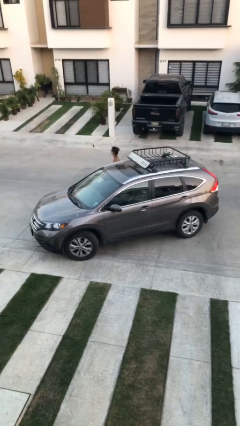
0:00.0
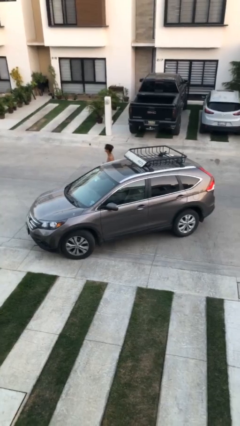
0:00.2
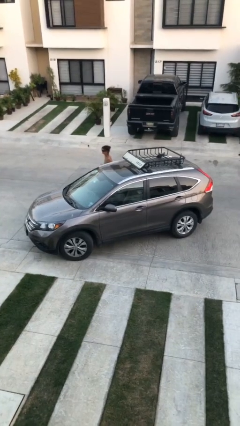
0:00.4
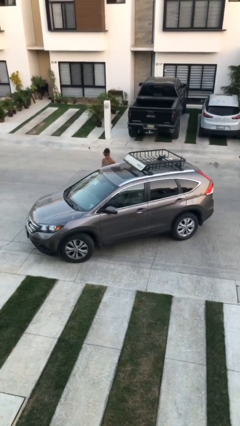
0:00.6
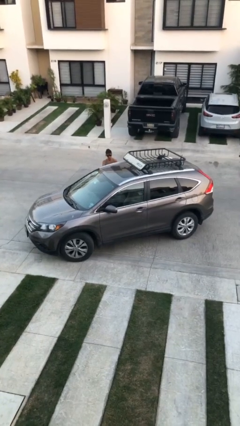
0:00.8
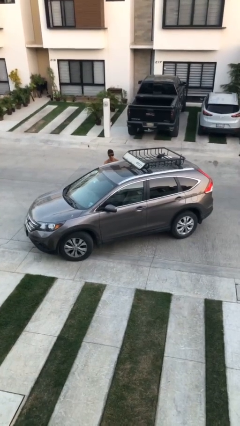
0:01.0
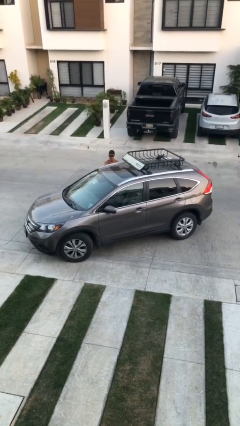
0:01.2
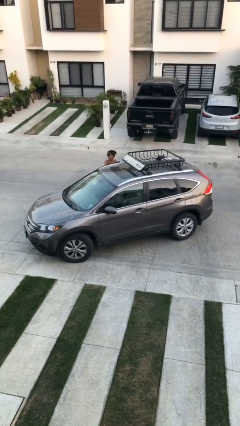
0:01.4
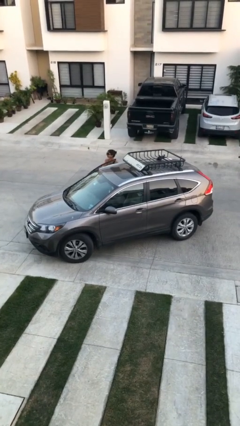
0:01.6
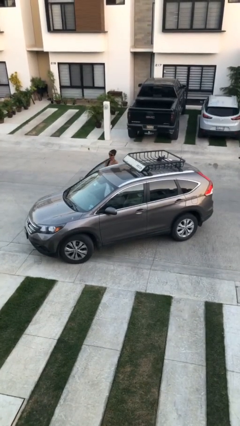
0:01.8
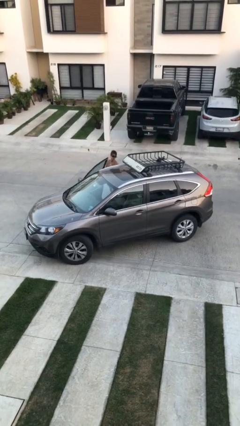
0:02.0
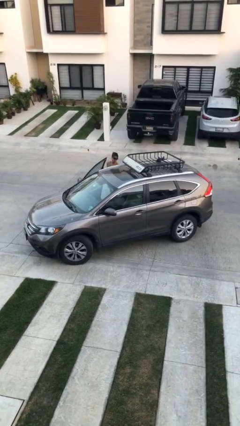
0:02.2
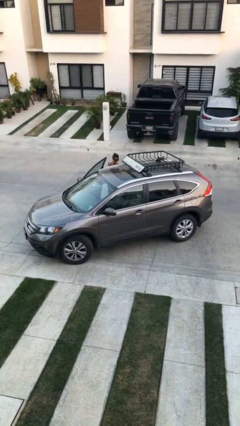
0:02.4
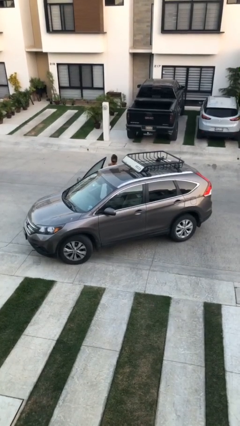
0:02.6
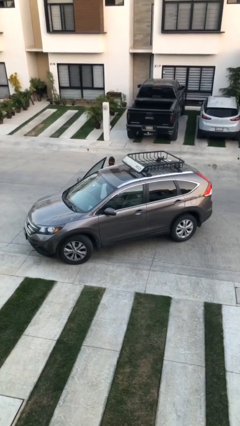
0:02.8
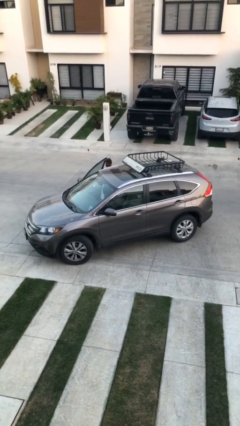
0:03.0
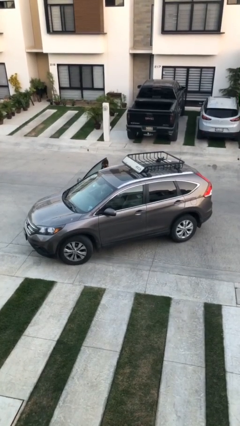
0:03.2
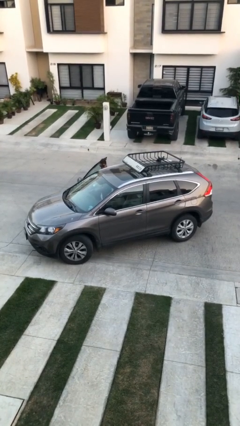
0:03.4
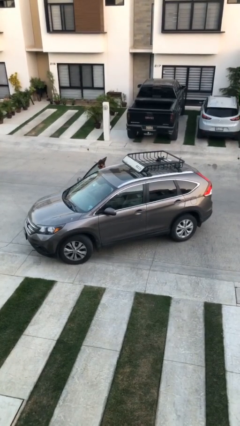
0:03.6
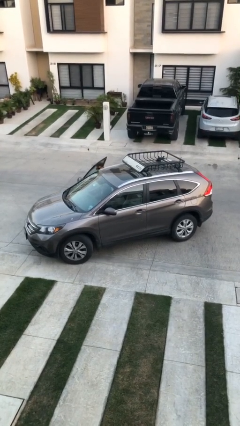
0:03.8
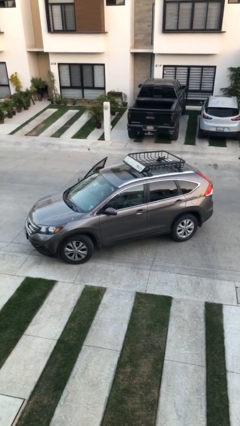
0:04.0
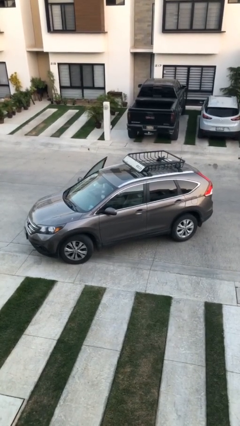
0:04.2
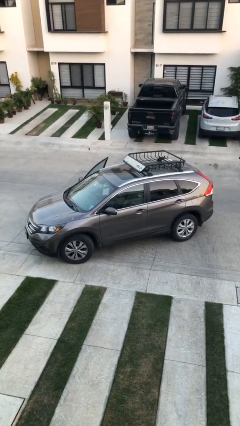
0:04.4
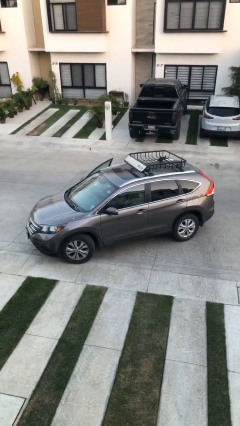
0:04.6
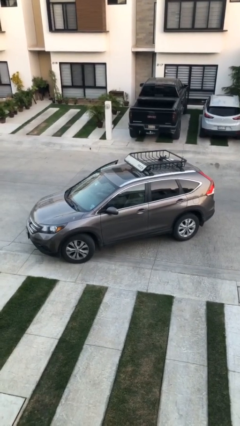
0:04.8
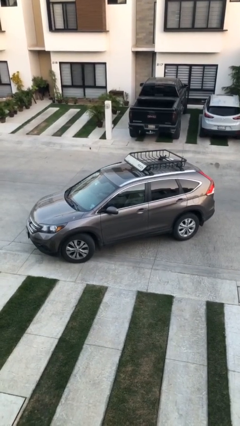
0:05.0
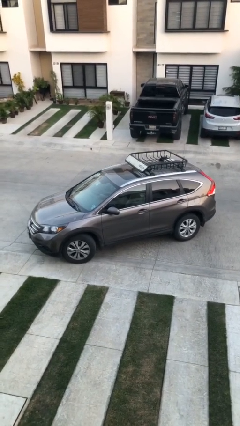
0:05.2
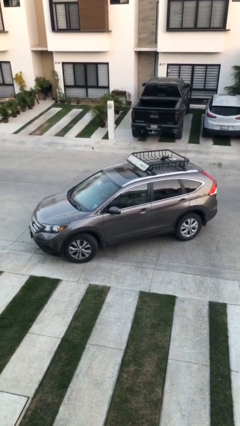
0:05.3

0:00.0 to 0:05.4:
car picks up person

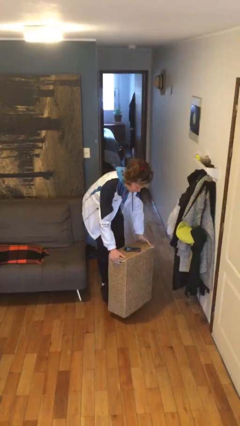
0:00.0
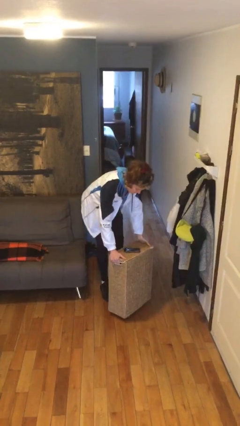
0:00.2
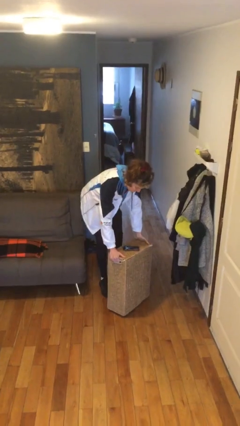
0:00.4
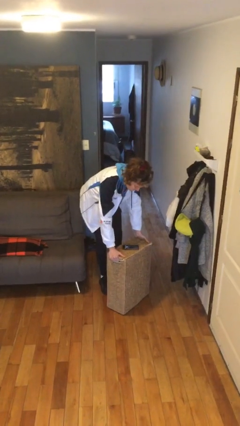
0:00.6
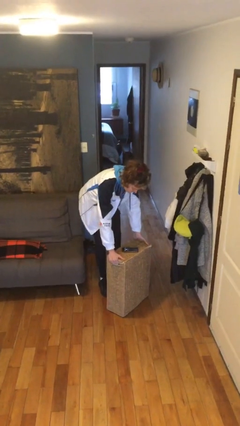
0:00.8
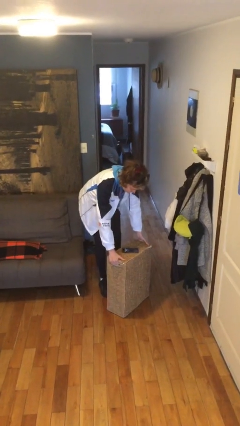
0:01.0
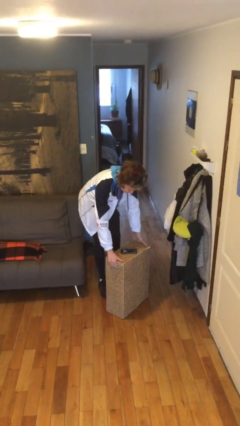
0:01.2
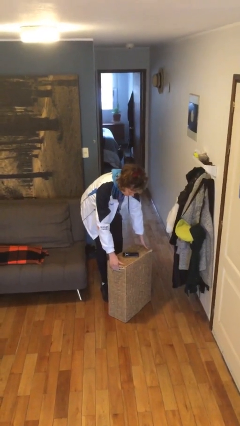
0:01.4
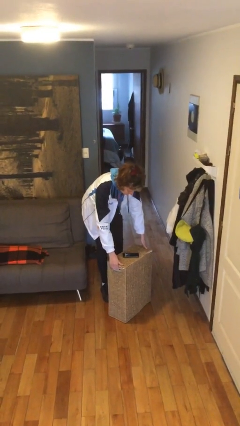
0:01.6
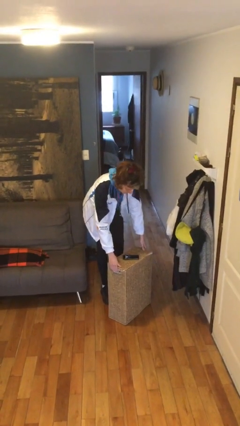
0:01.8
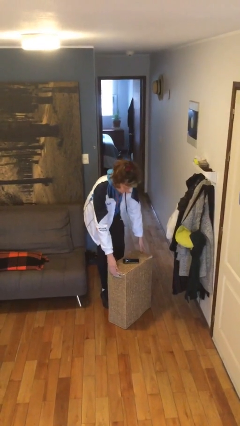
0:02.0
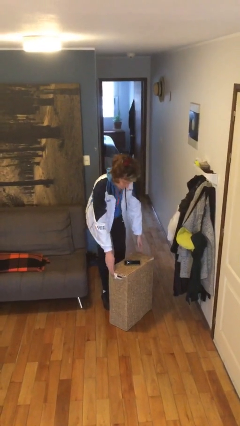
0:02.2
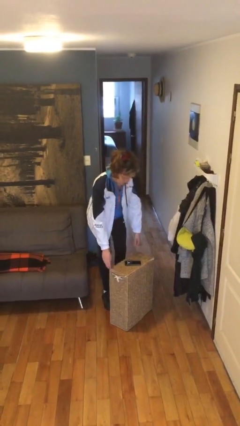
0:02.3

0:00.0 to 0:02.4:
person puts down object on floor

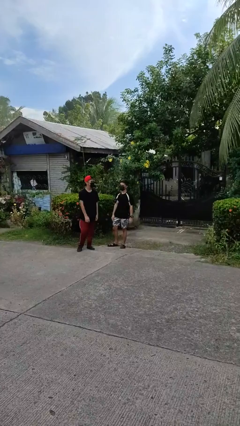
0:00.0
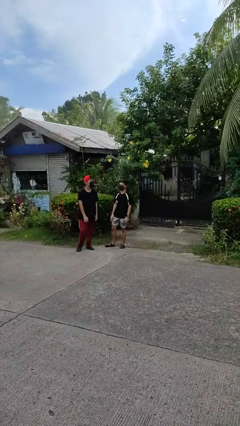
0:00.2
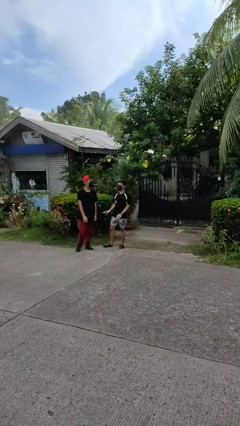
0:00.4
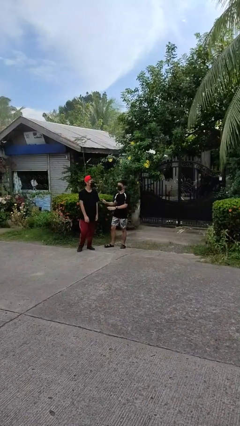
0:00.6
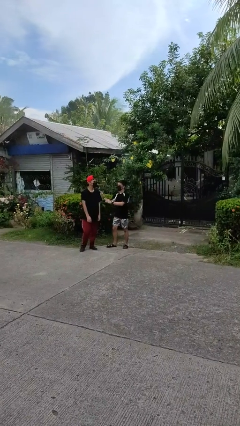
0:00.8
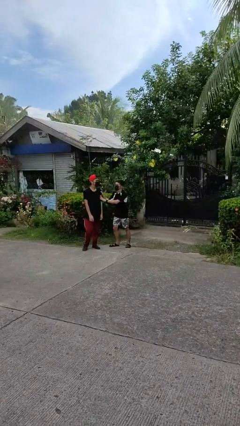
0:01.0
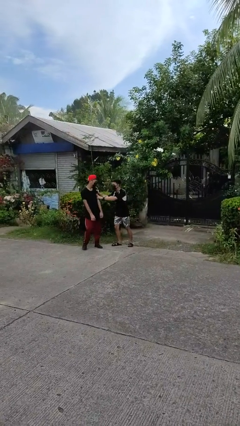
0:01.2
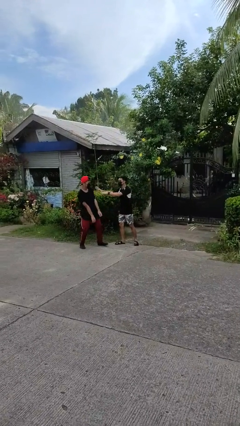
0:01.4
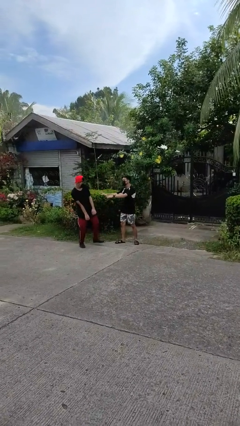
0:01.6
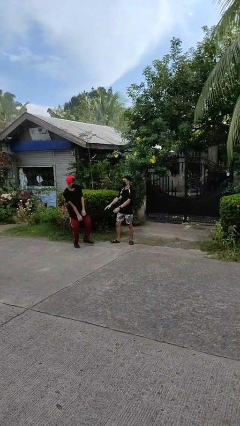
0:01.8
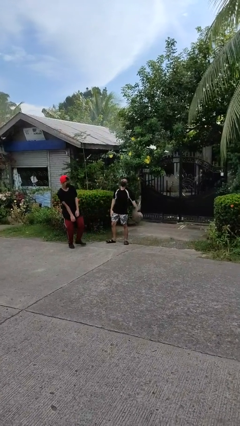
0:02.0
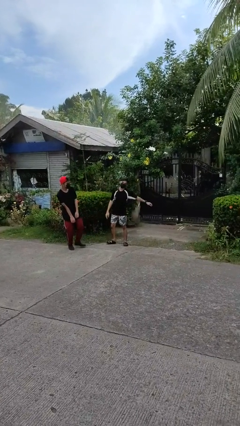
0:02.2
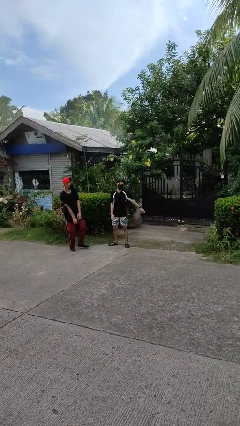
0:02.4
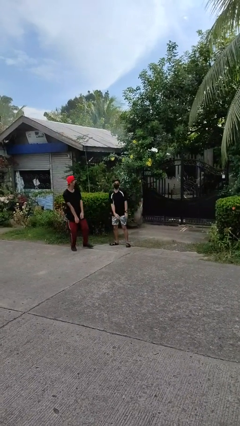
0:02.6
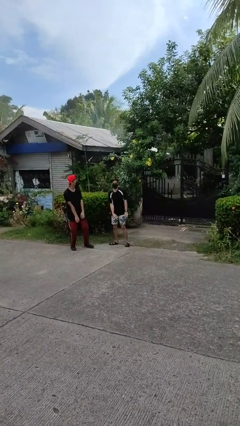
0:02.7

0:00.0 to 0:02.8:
person shoves person

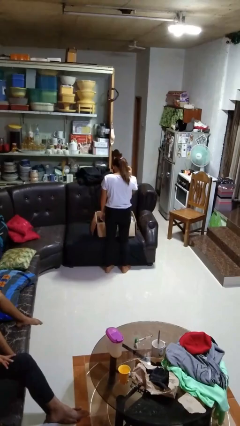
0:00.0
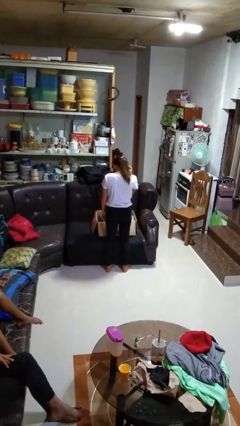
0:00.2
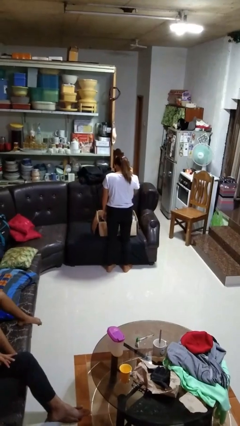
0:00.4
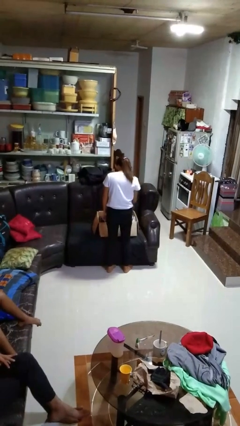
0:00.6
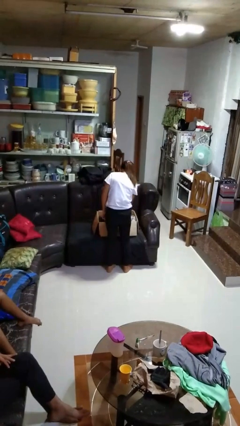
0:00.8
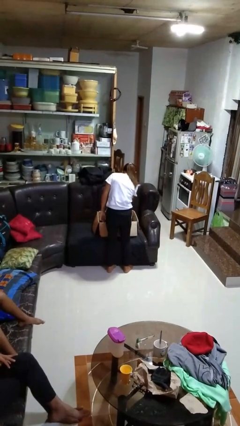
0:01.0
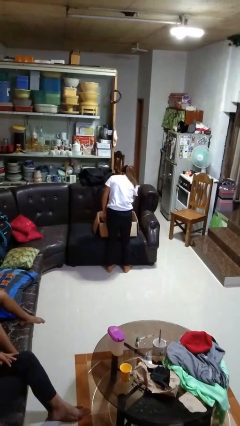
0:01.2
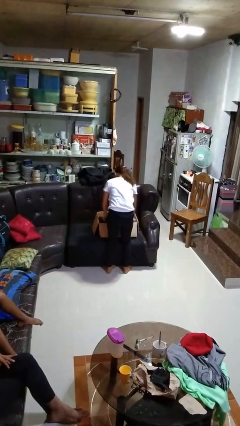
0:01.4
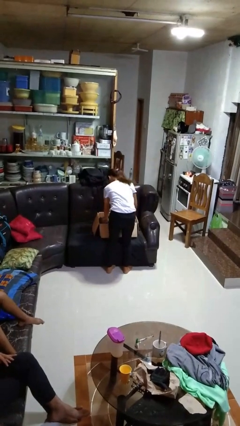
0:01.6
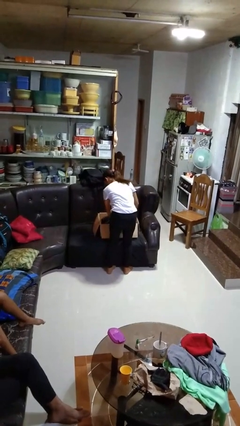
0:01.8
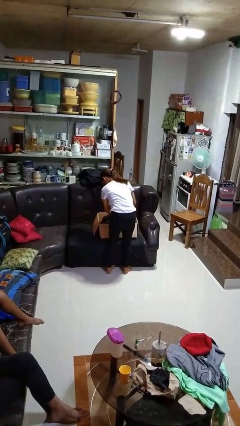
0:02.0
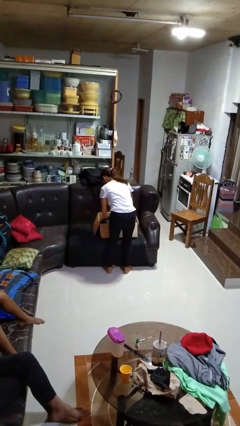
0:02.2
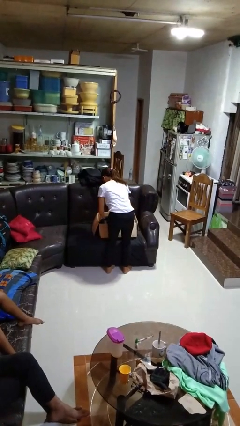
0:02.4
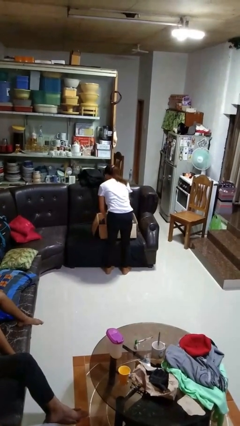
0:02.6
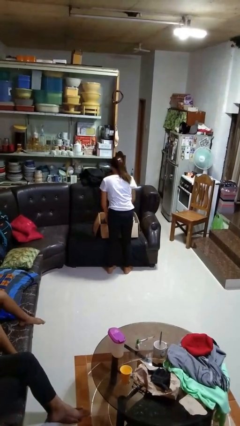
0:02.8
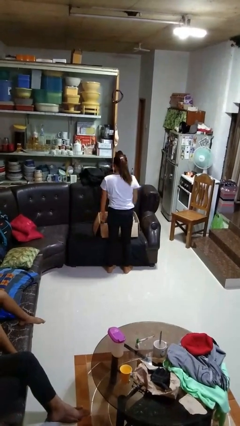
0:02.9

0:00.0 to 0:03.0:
person searches in box

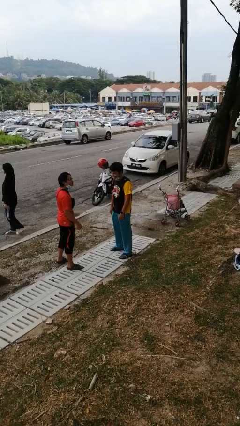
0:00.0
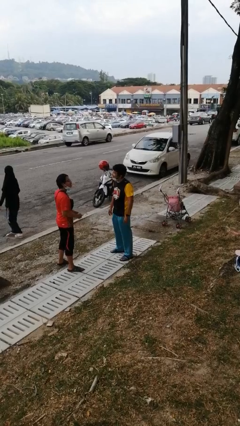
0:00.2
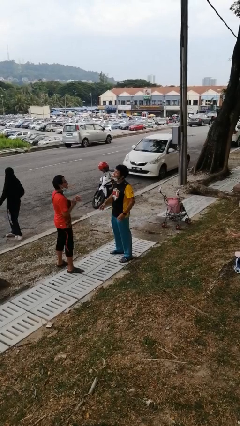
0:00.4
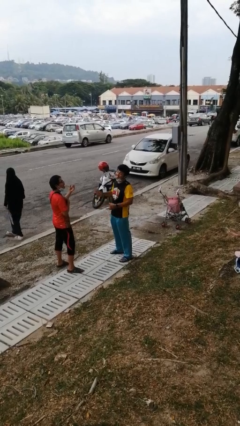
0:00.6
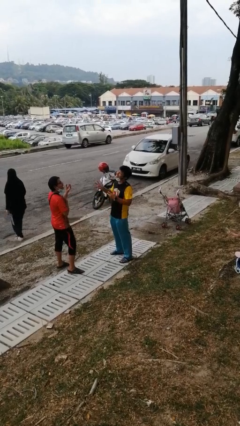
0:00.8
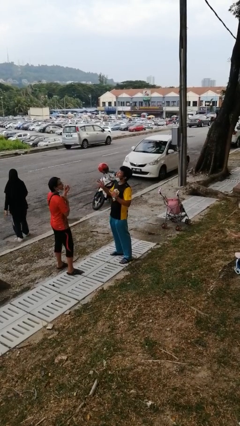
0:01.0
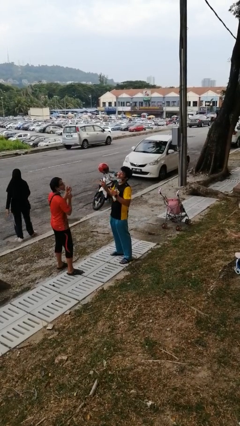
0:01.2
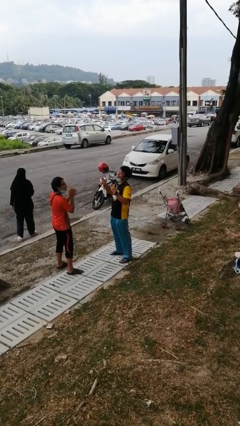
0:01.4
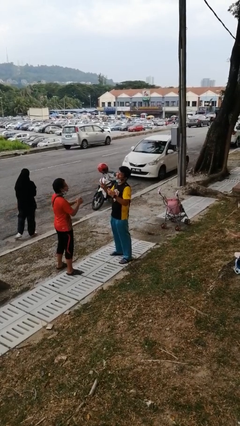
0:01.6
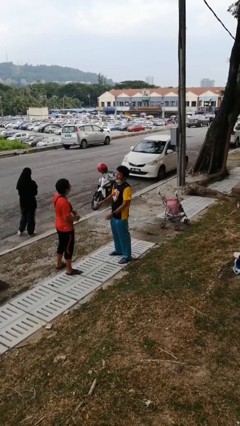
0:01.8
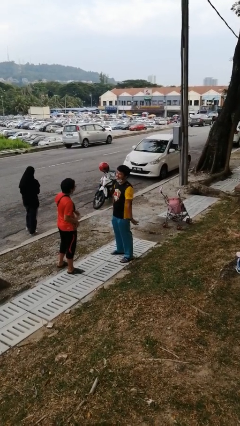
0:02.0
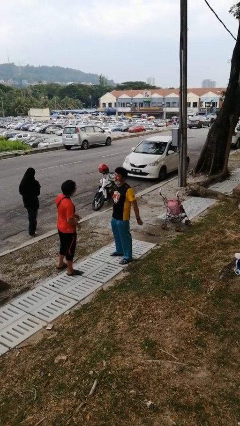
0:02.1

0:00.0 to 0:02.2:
person laughs with person

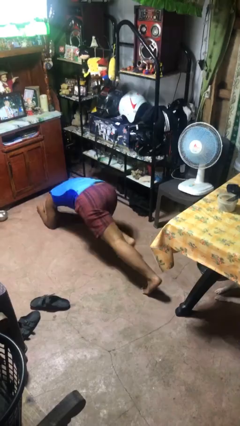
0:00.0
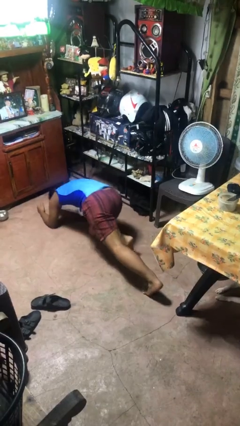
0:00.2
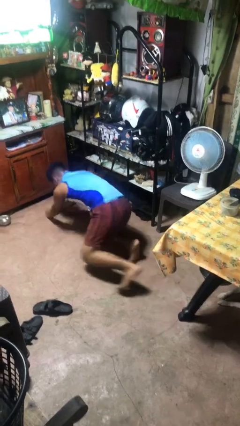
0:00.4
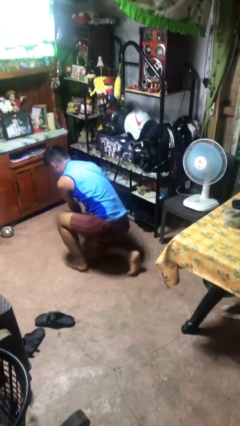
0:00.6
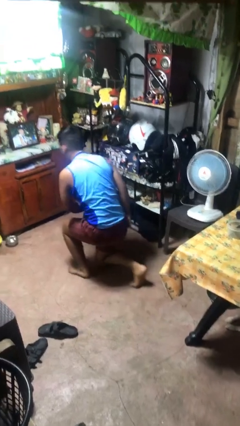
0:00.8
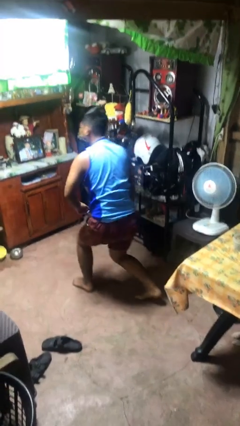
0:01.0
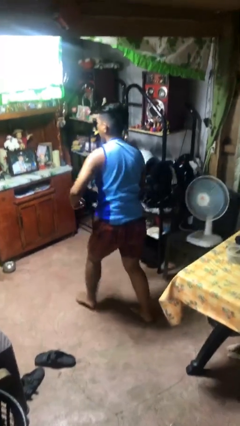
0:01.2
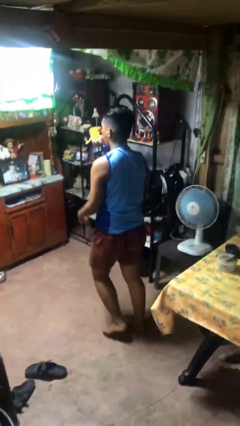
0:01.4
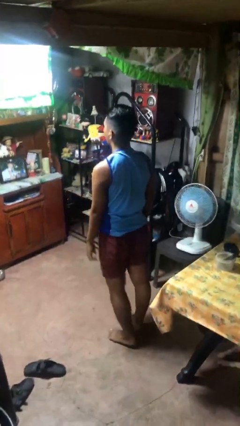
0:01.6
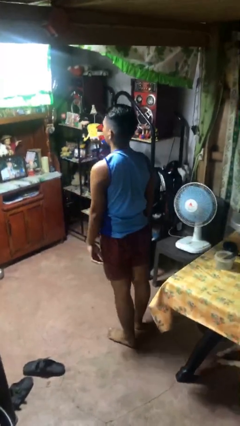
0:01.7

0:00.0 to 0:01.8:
person stands up from floor
